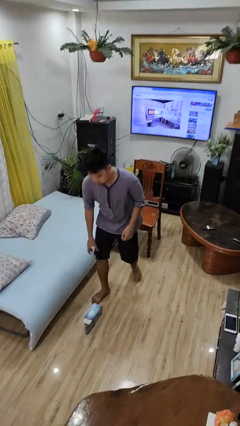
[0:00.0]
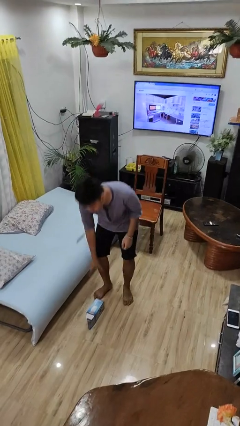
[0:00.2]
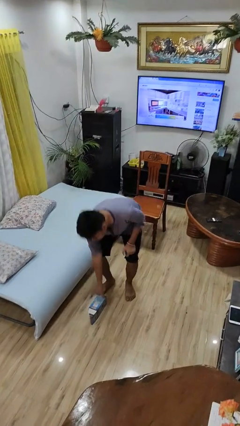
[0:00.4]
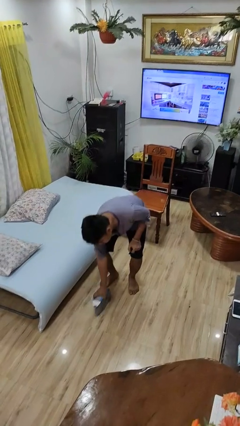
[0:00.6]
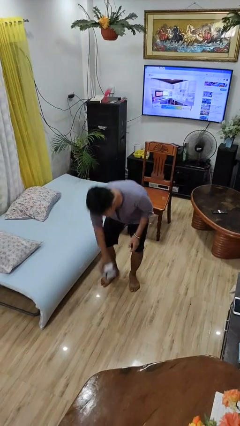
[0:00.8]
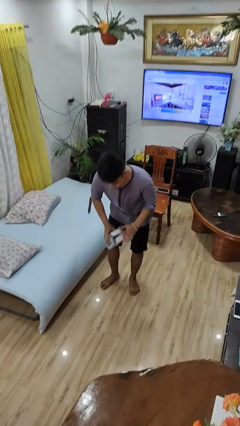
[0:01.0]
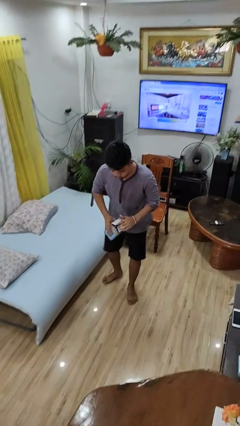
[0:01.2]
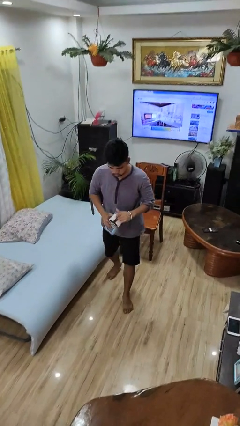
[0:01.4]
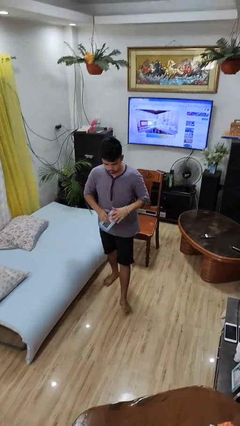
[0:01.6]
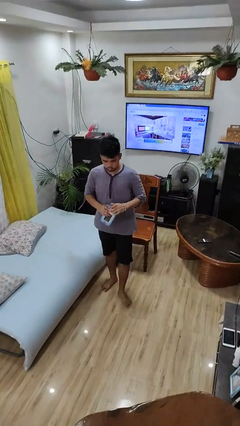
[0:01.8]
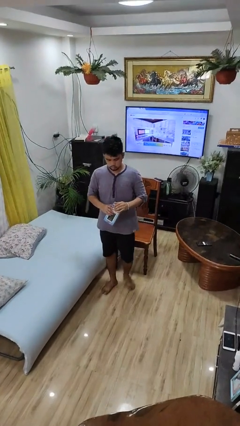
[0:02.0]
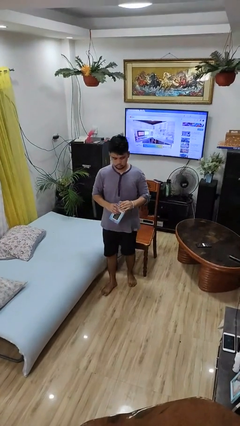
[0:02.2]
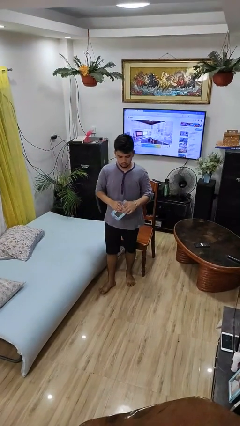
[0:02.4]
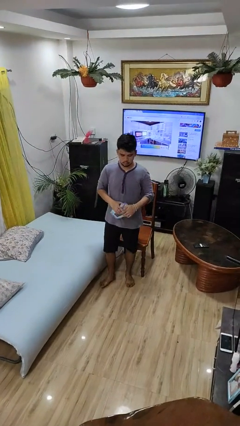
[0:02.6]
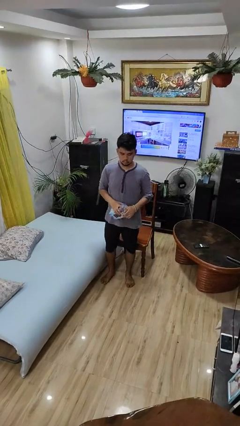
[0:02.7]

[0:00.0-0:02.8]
person picks up object from floor

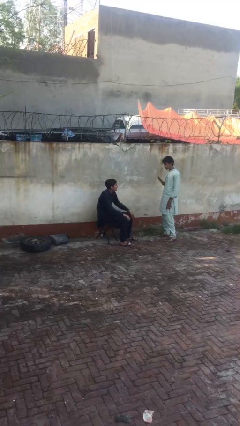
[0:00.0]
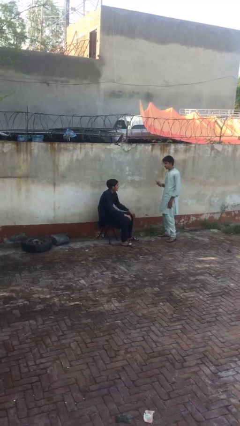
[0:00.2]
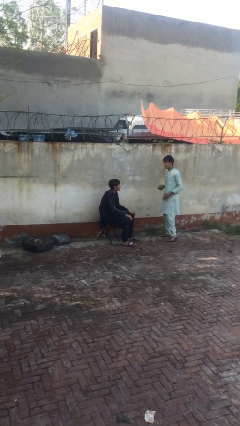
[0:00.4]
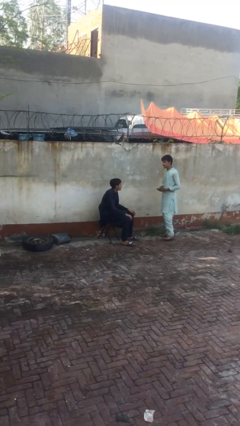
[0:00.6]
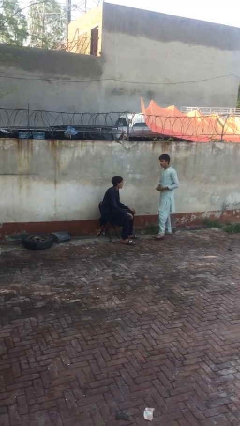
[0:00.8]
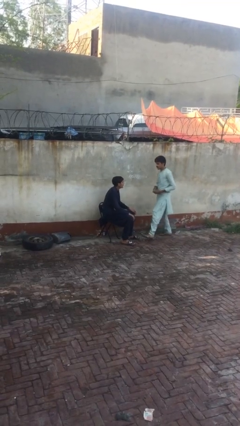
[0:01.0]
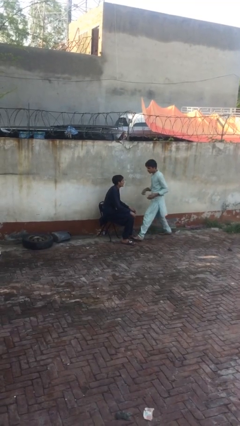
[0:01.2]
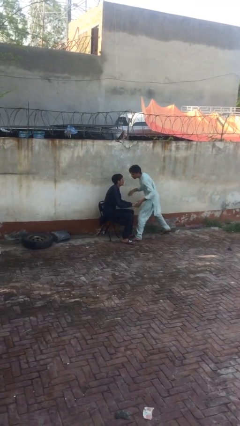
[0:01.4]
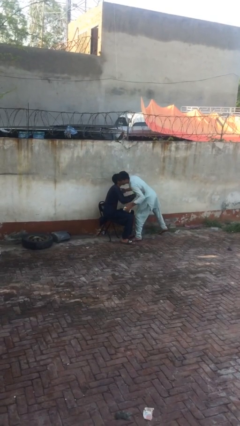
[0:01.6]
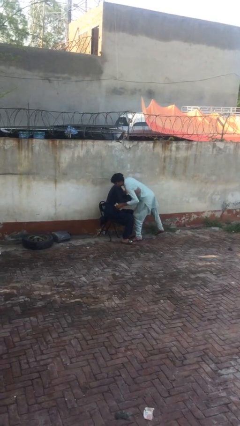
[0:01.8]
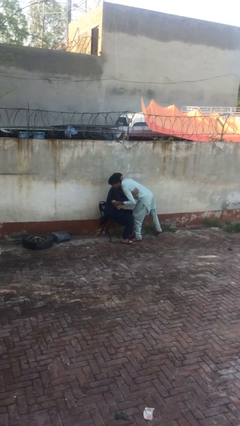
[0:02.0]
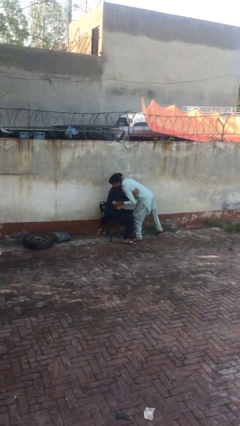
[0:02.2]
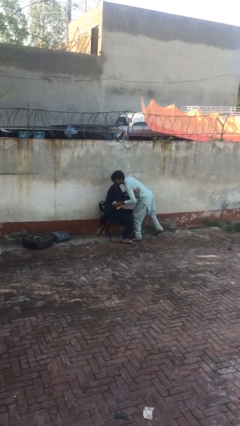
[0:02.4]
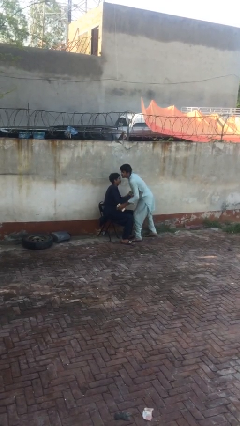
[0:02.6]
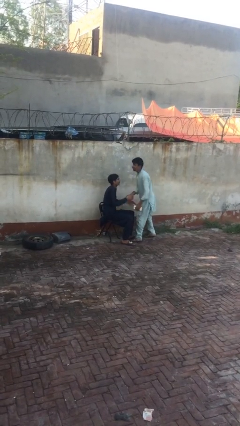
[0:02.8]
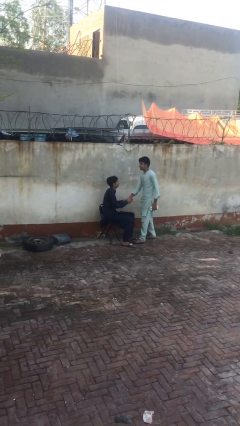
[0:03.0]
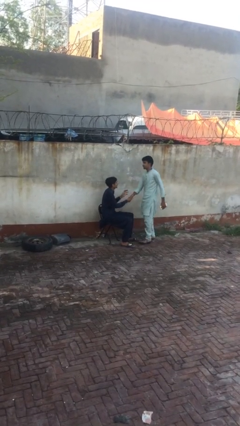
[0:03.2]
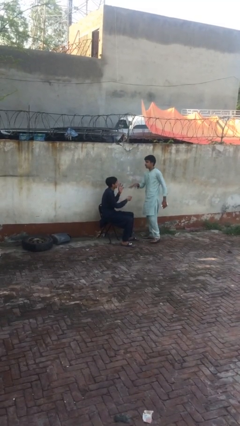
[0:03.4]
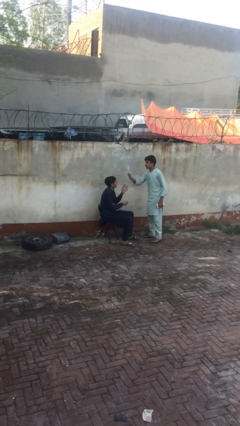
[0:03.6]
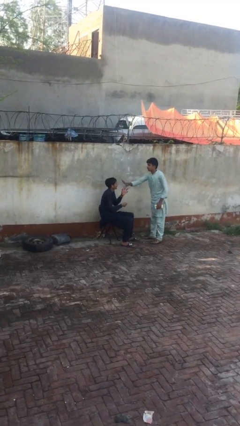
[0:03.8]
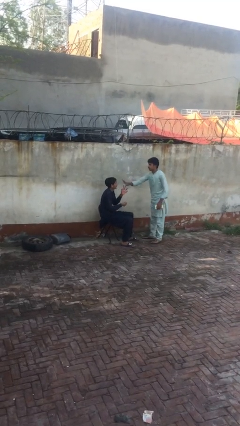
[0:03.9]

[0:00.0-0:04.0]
person embraces person

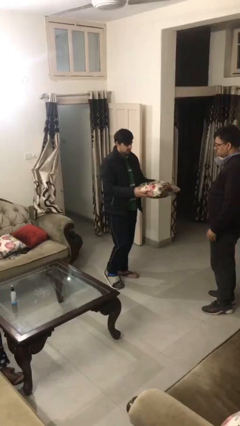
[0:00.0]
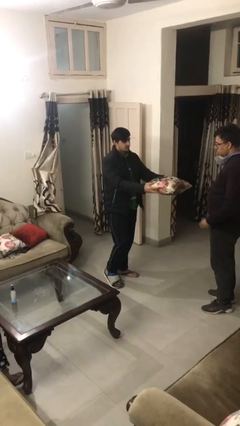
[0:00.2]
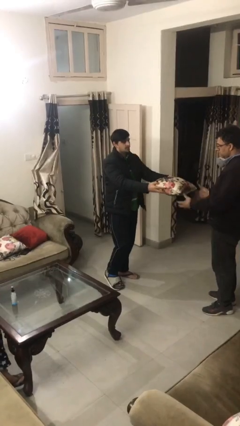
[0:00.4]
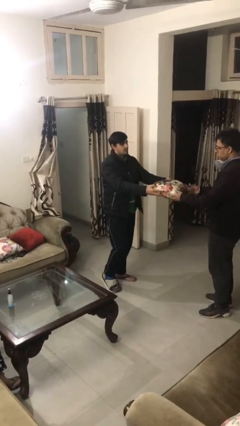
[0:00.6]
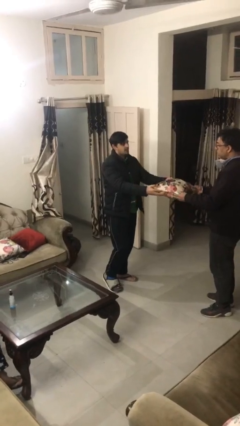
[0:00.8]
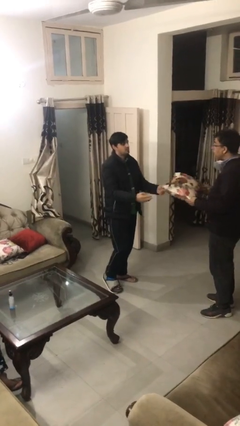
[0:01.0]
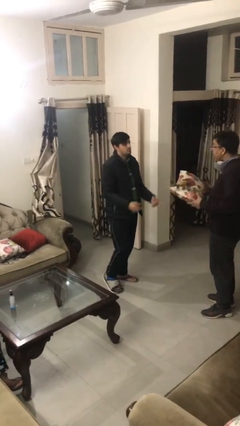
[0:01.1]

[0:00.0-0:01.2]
person transfers object to person

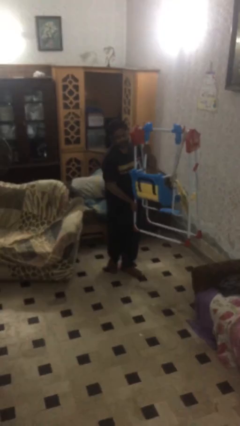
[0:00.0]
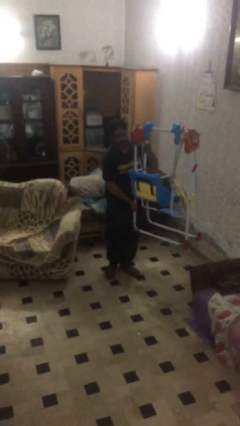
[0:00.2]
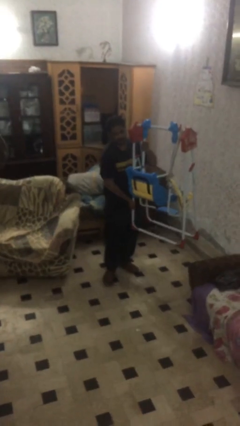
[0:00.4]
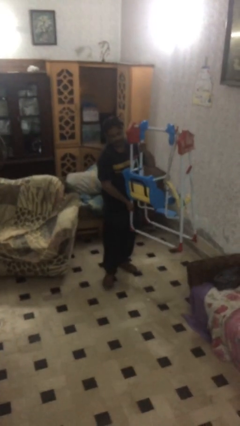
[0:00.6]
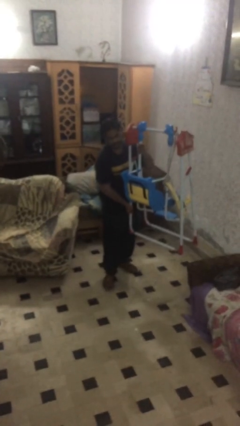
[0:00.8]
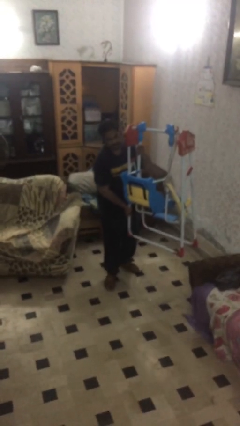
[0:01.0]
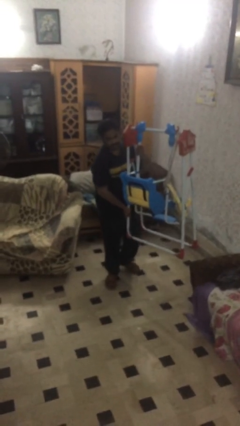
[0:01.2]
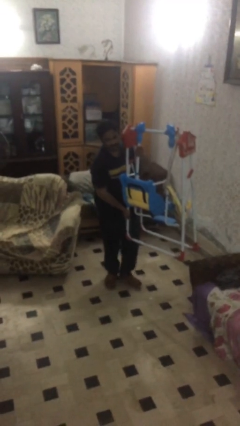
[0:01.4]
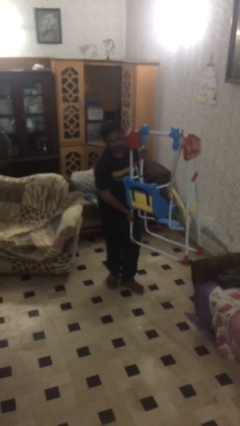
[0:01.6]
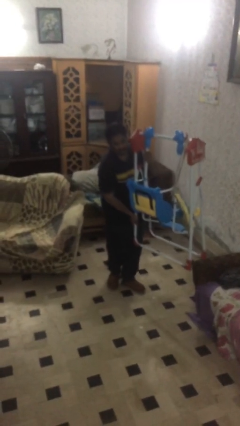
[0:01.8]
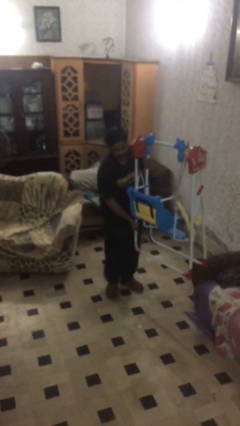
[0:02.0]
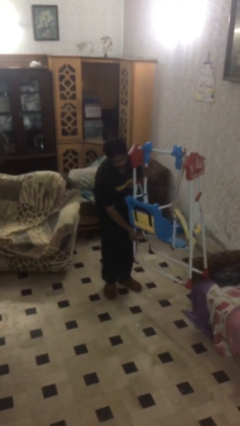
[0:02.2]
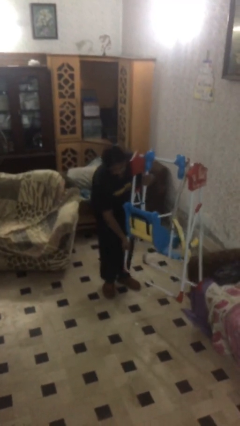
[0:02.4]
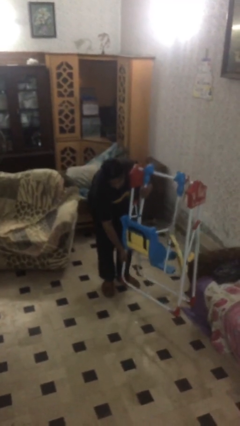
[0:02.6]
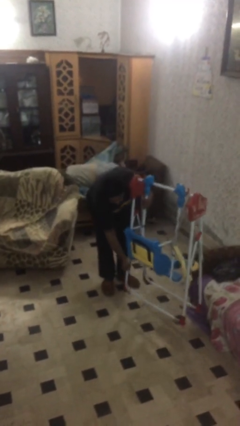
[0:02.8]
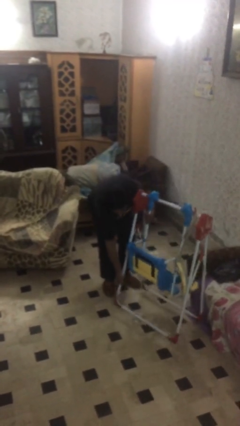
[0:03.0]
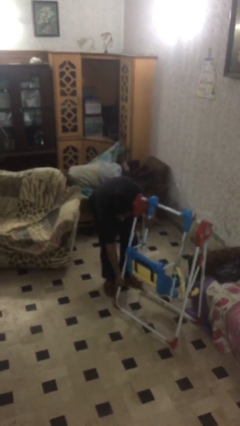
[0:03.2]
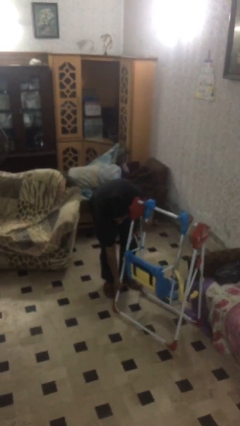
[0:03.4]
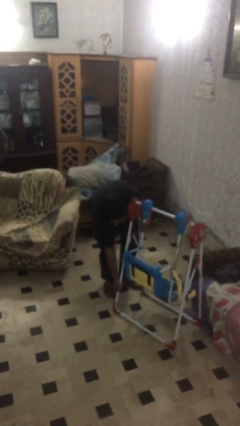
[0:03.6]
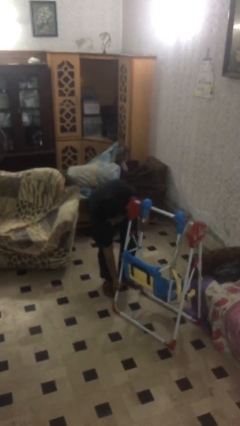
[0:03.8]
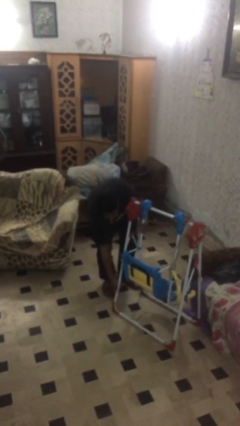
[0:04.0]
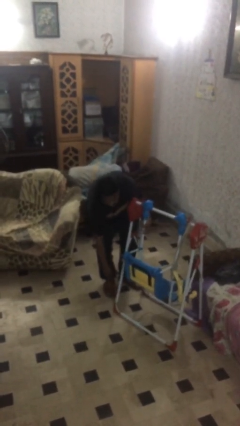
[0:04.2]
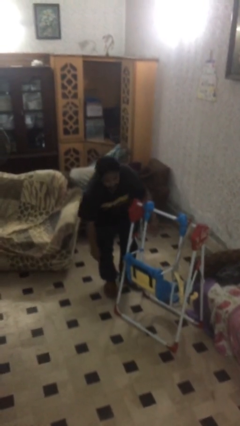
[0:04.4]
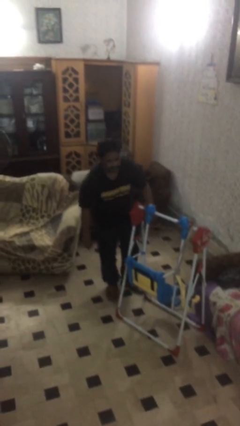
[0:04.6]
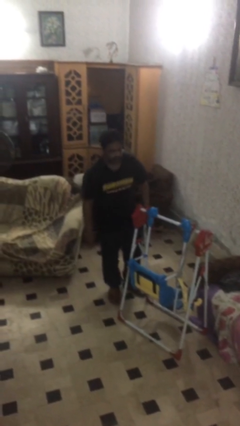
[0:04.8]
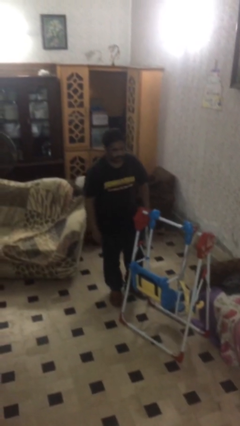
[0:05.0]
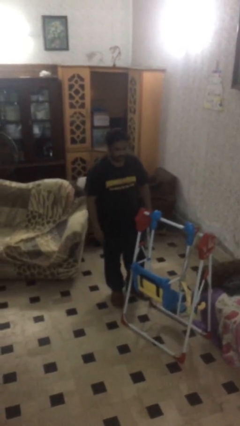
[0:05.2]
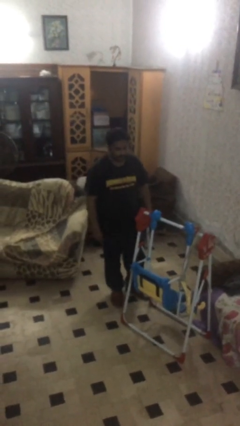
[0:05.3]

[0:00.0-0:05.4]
person puts down object on floor

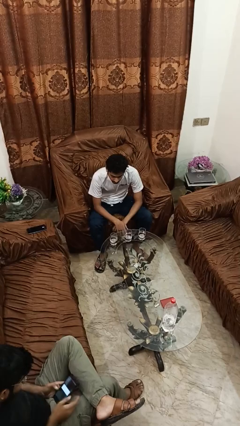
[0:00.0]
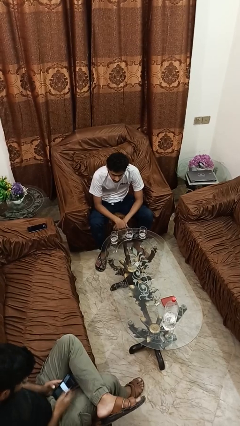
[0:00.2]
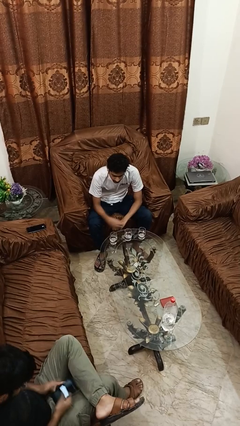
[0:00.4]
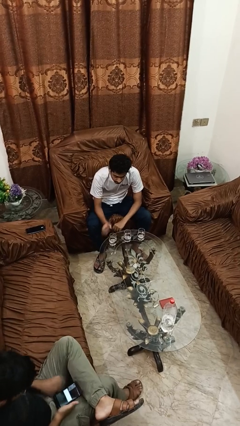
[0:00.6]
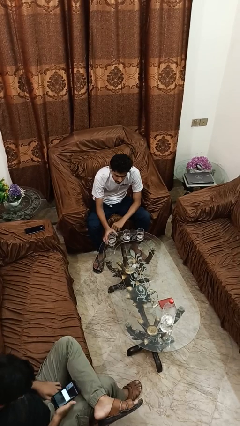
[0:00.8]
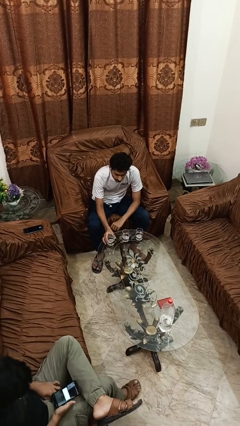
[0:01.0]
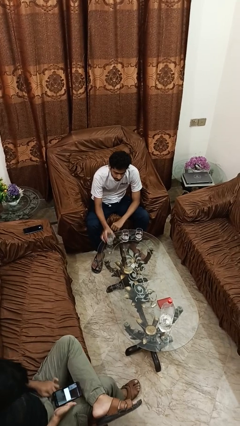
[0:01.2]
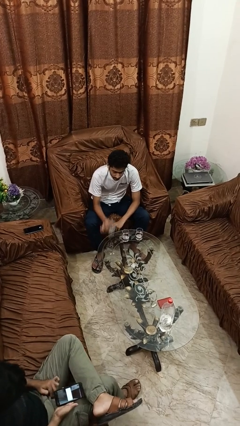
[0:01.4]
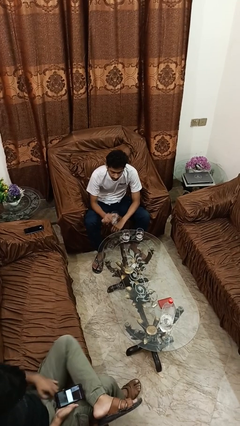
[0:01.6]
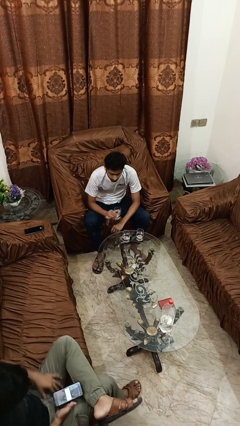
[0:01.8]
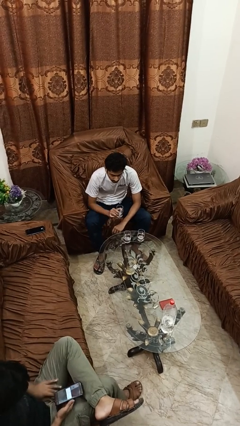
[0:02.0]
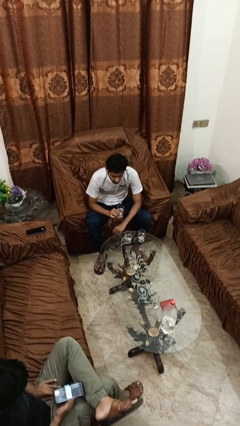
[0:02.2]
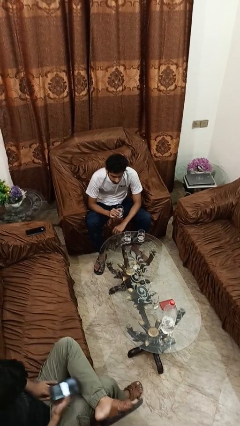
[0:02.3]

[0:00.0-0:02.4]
person picks up object from table

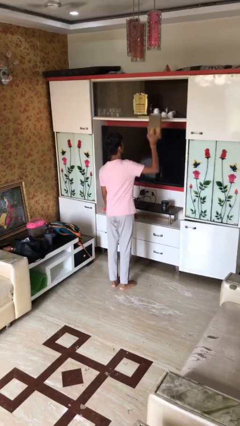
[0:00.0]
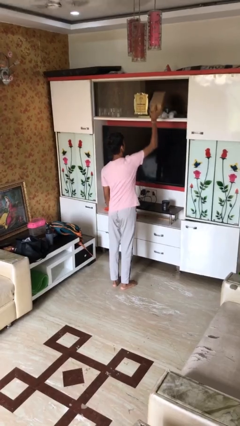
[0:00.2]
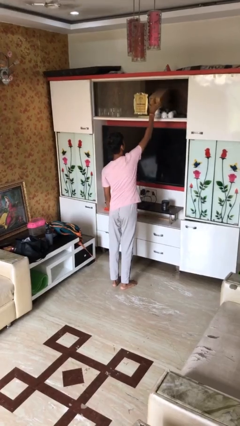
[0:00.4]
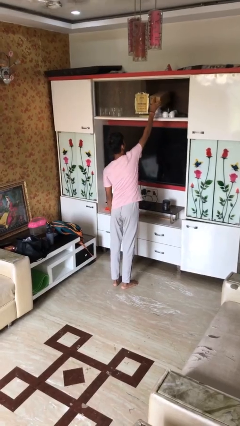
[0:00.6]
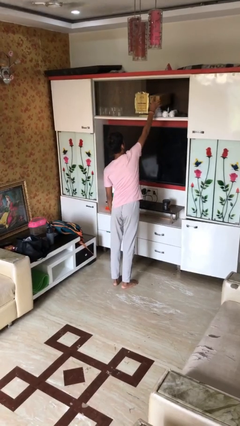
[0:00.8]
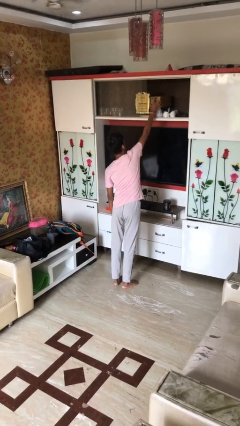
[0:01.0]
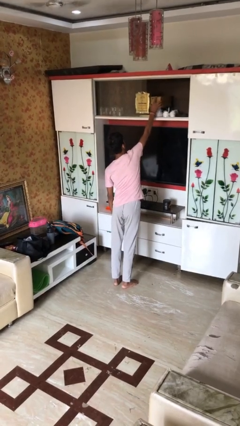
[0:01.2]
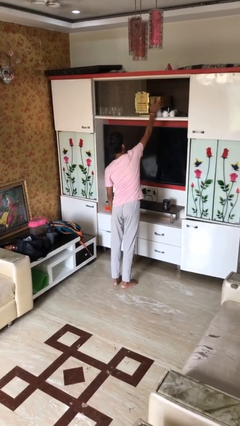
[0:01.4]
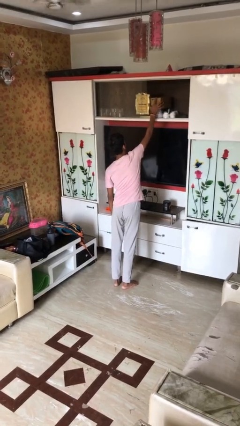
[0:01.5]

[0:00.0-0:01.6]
person puts down object on shelf
